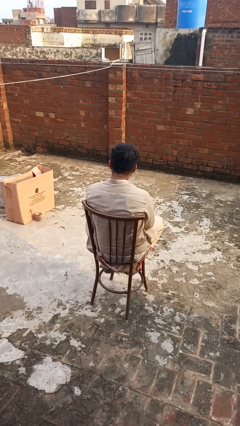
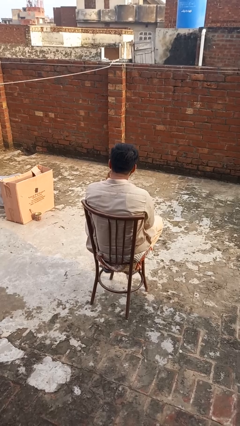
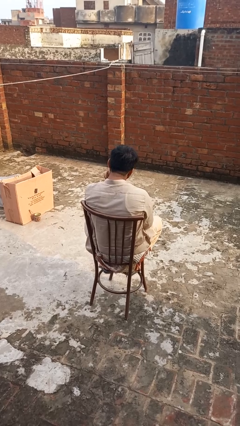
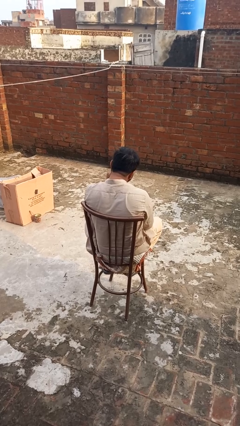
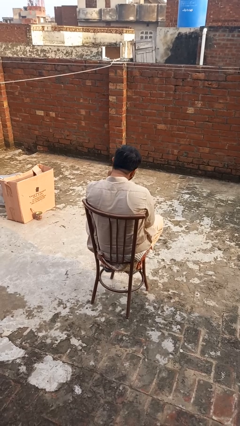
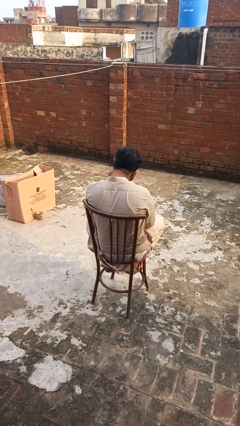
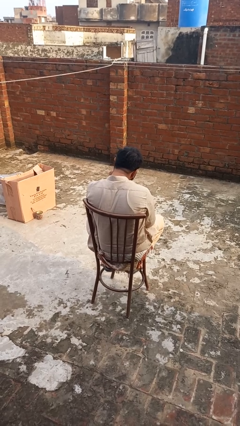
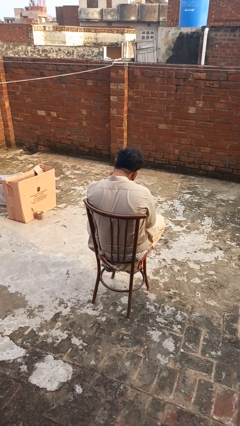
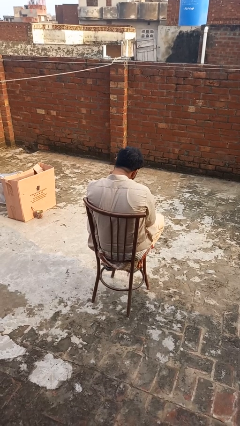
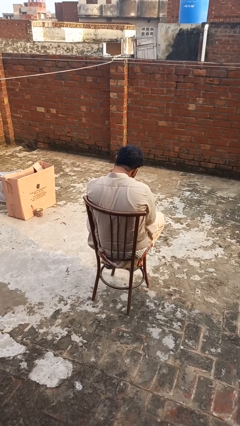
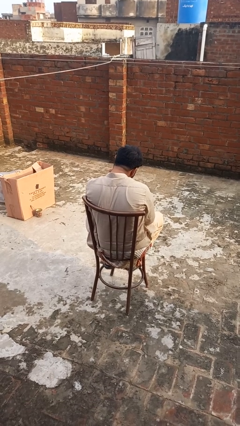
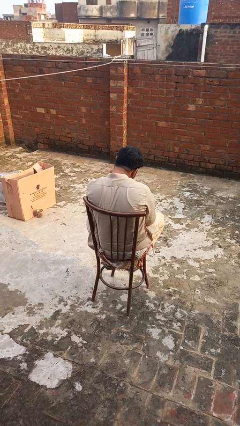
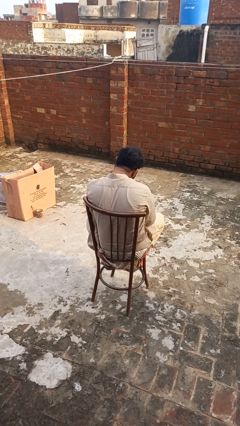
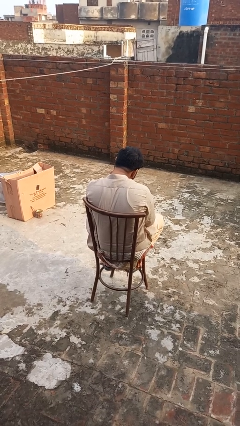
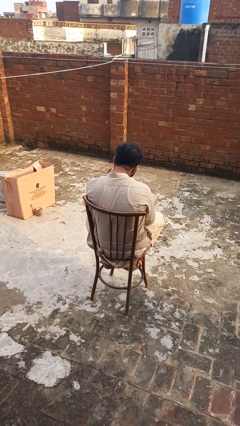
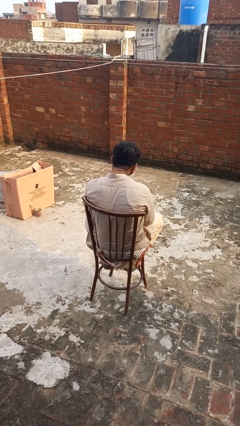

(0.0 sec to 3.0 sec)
person gestures listen closely

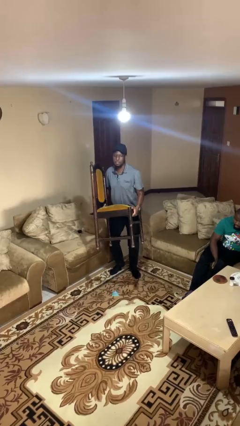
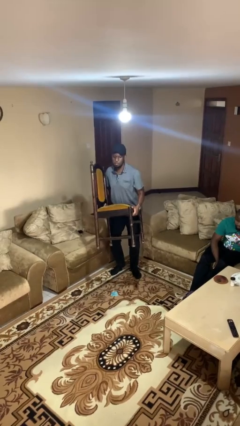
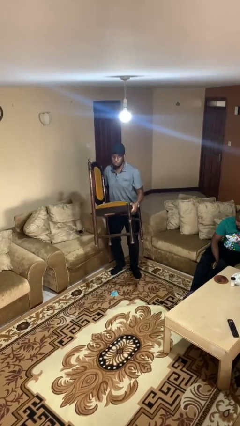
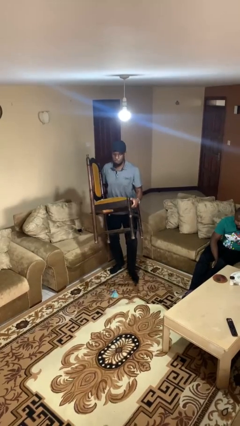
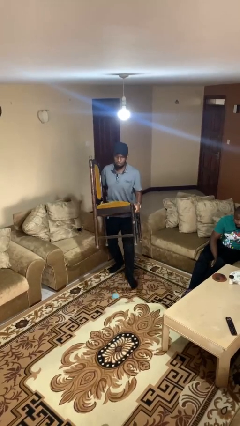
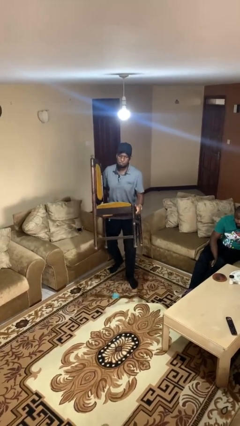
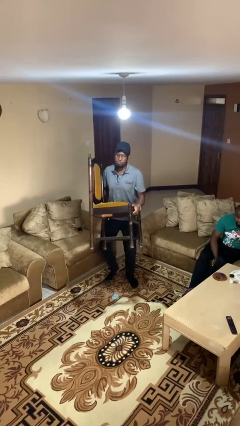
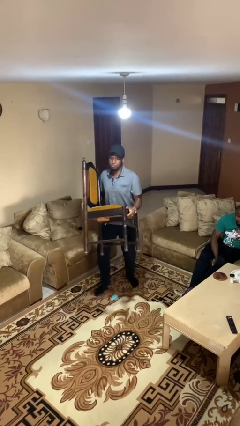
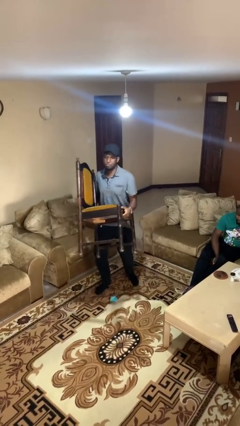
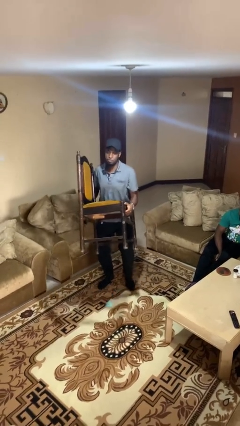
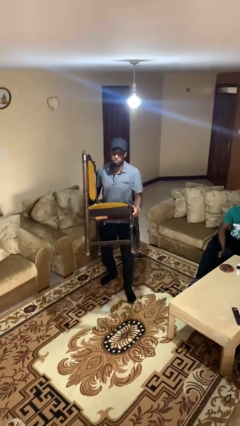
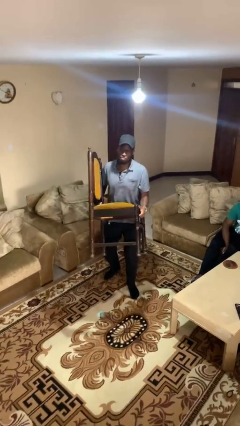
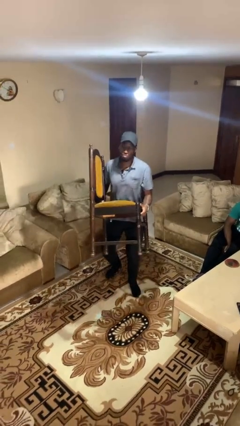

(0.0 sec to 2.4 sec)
person carries heavy object

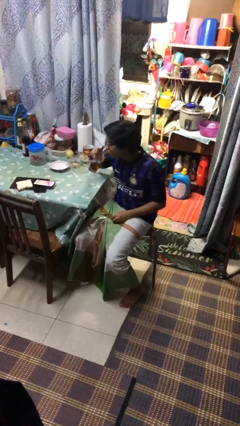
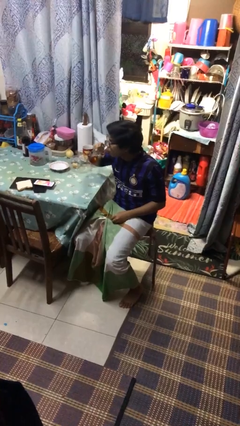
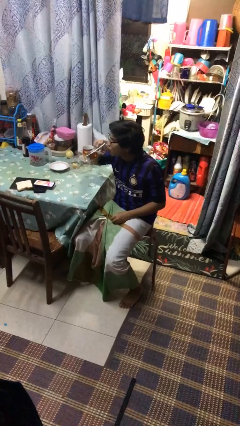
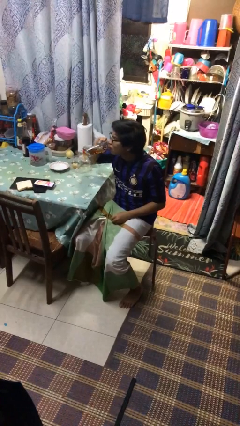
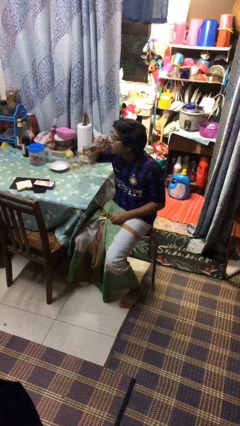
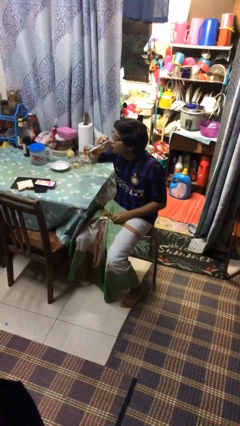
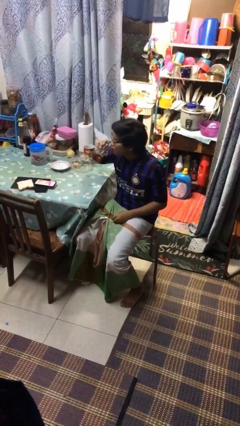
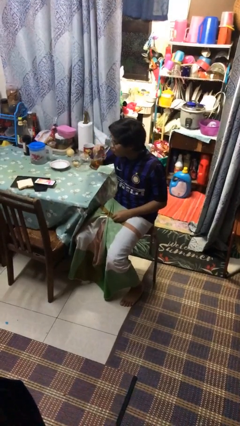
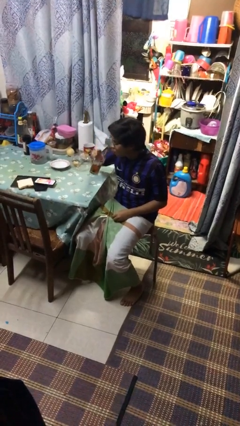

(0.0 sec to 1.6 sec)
person drinks from mug

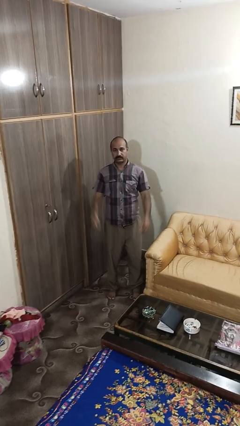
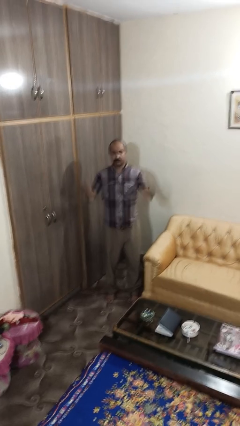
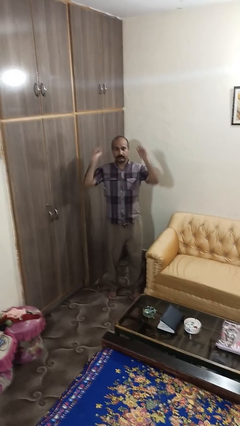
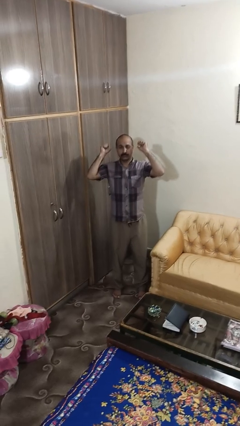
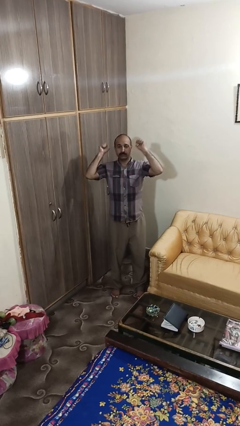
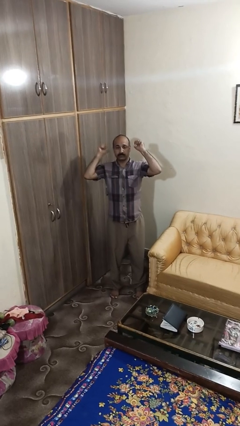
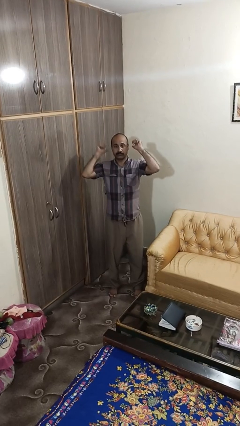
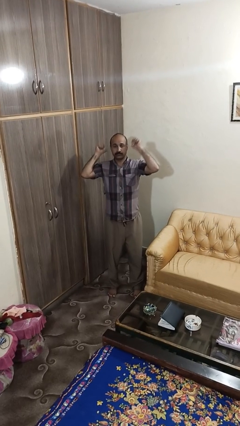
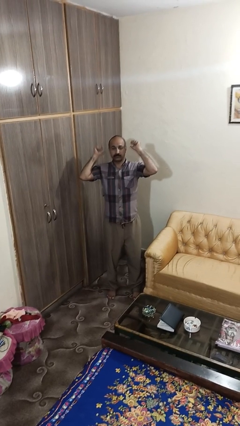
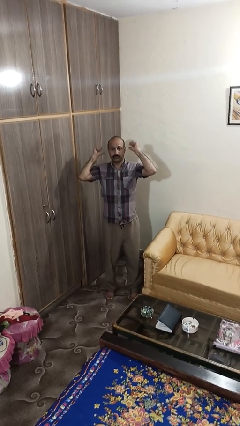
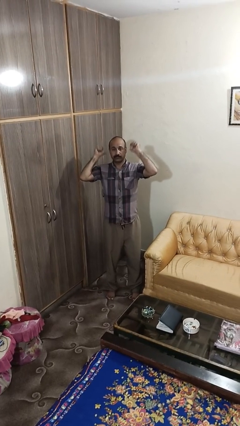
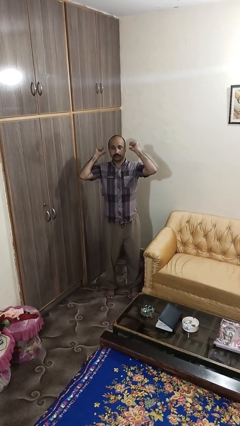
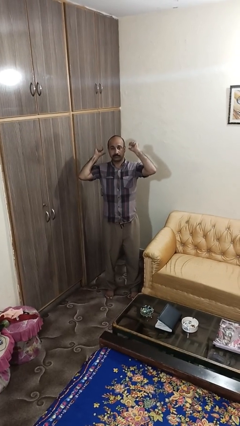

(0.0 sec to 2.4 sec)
person gestures behind me

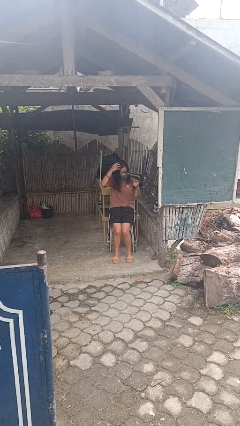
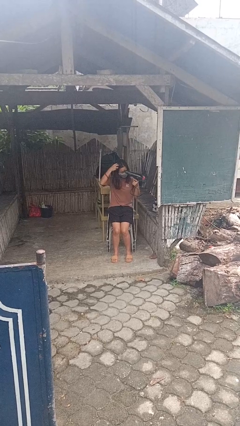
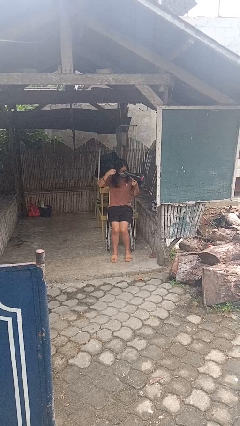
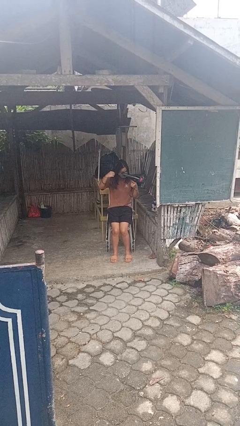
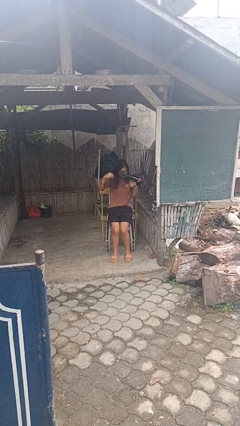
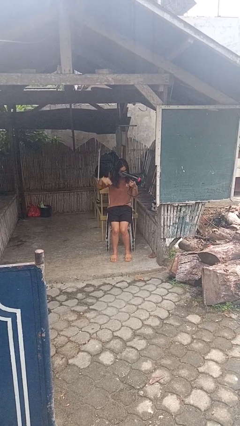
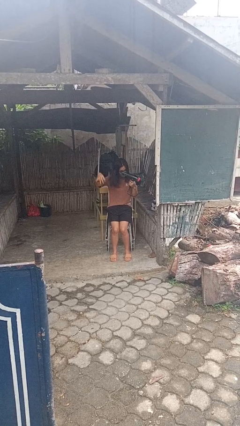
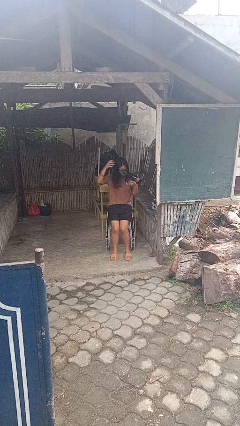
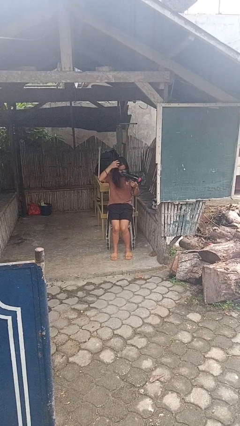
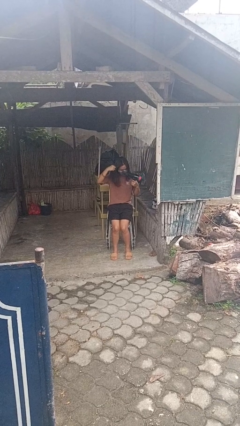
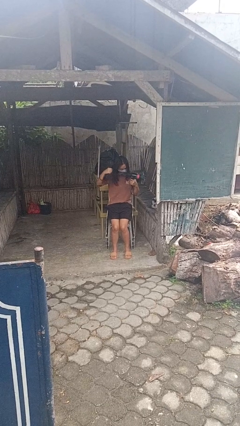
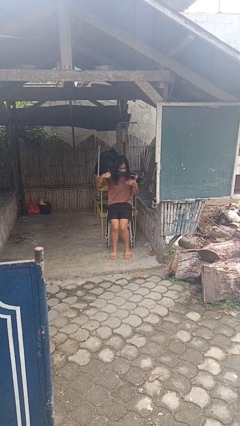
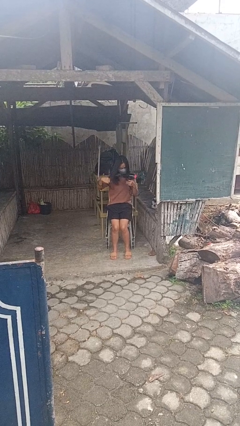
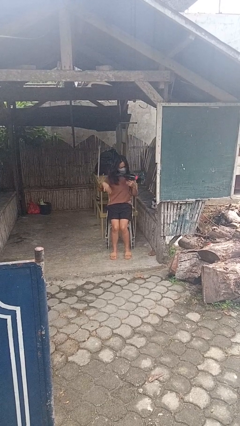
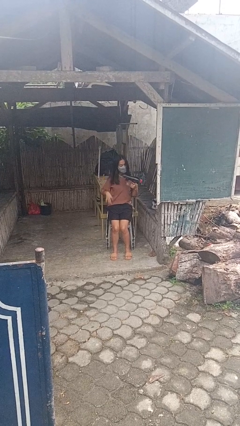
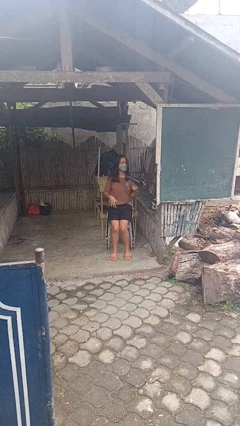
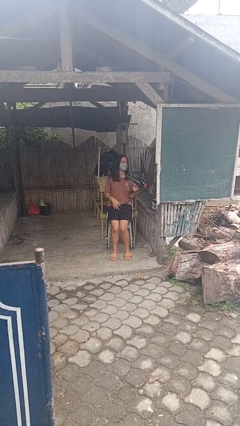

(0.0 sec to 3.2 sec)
person dries hair with hairdryer

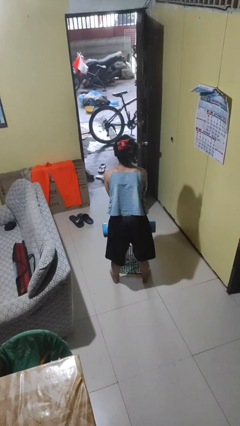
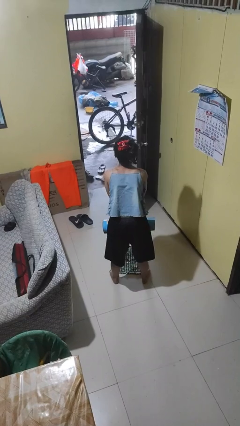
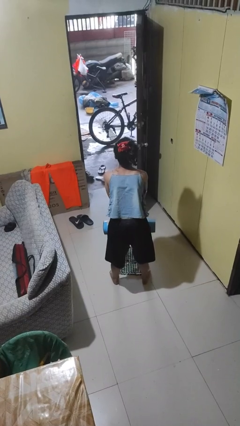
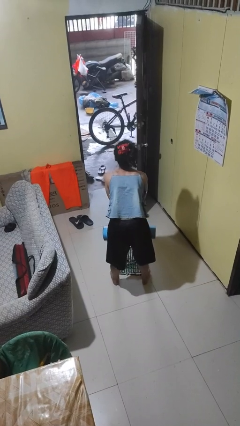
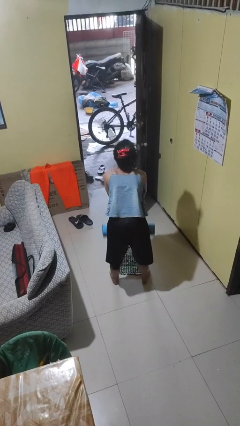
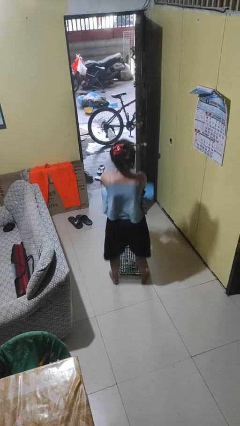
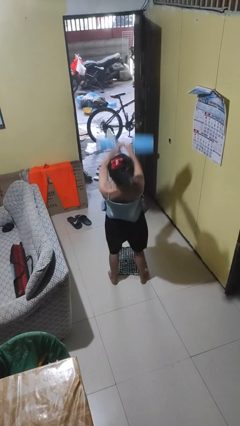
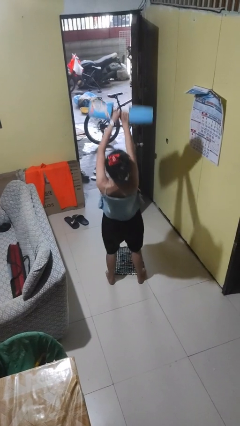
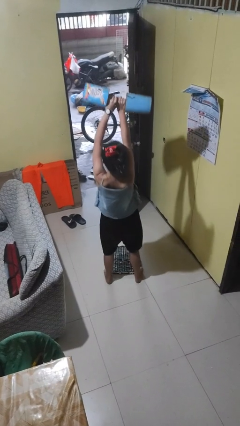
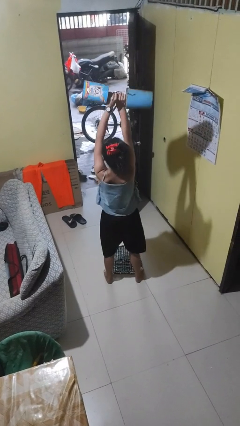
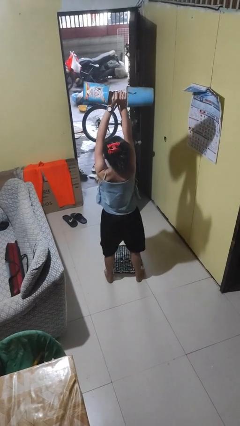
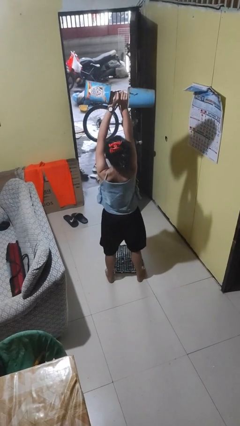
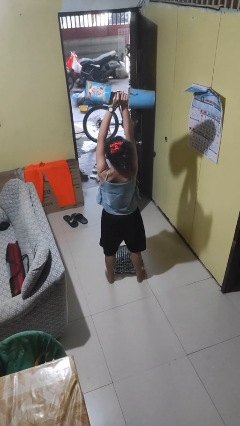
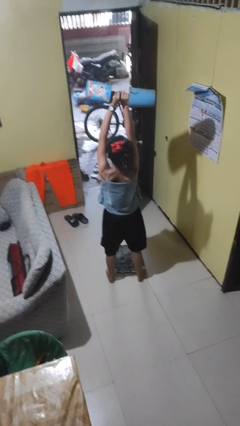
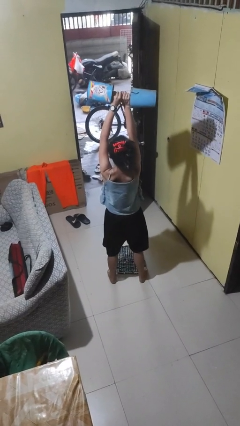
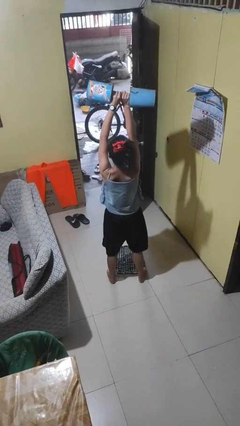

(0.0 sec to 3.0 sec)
person lifts dumbbells

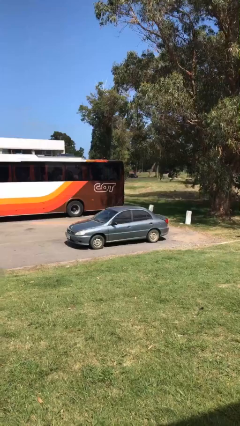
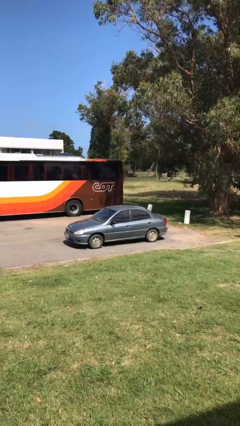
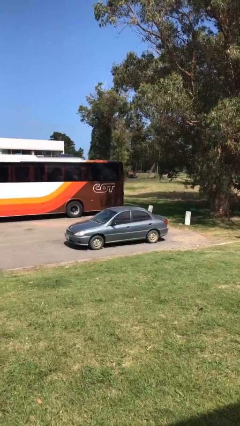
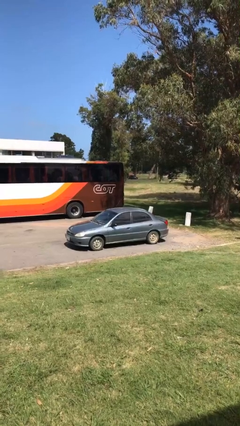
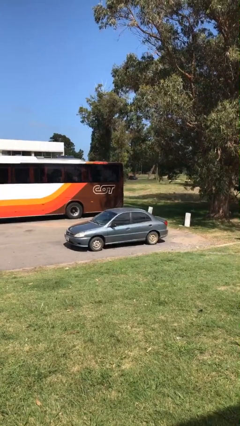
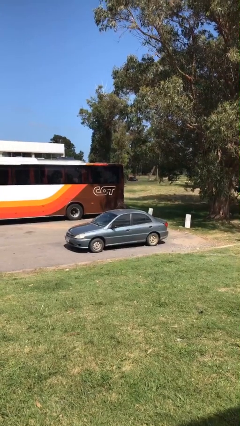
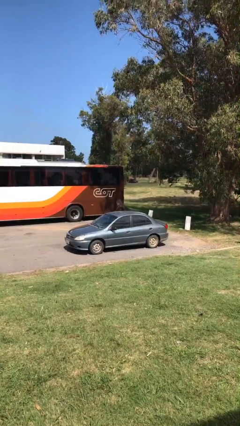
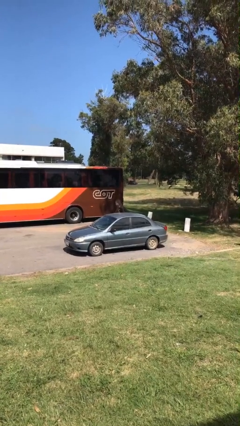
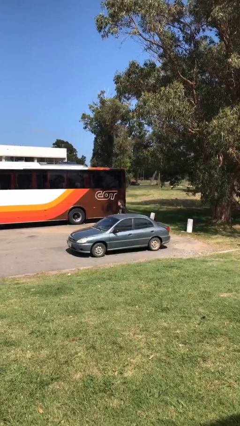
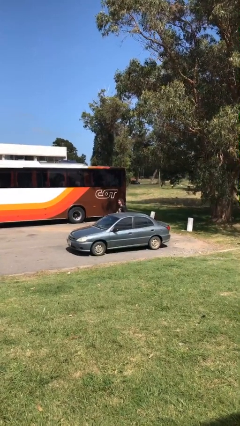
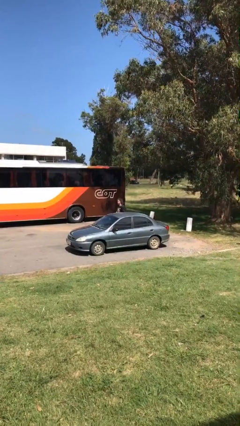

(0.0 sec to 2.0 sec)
person exits car
